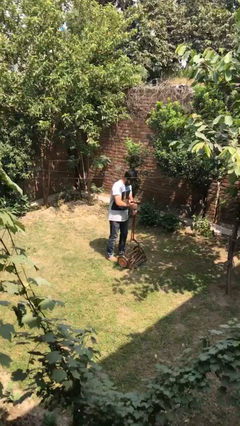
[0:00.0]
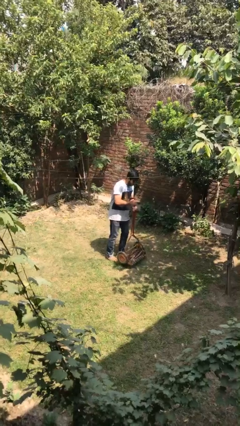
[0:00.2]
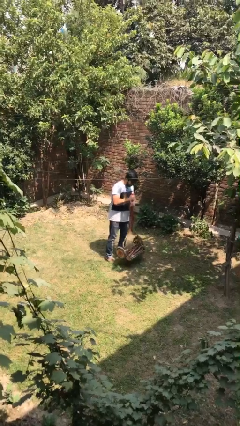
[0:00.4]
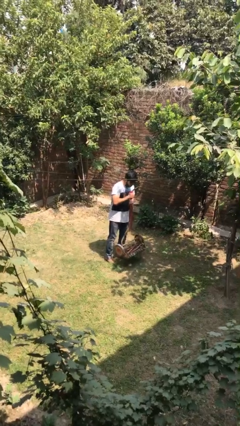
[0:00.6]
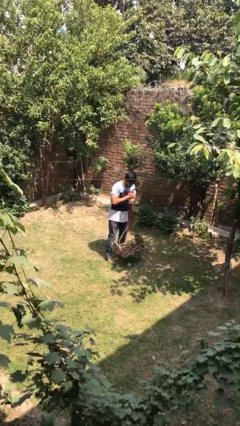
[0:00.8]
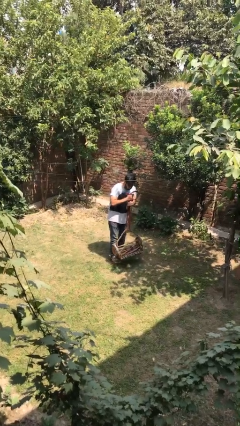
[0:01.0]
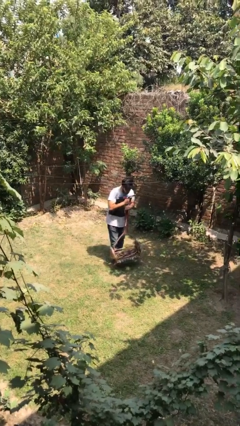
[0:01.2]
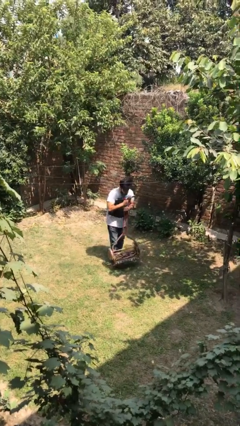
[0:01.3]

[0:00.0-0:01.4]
person picks up object from floor

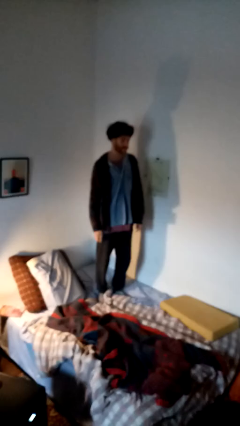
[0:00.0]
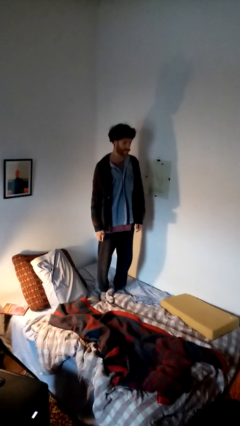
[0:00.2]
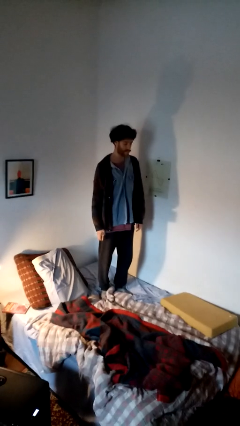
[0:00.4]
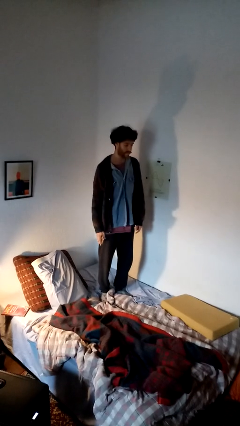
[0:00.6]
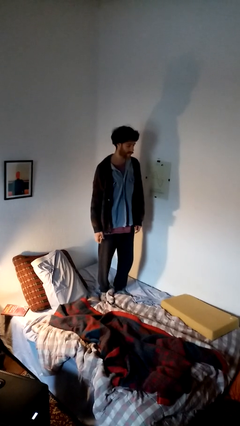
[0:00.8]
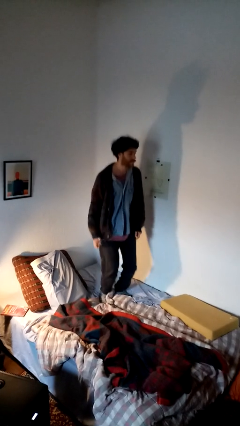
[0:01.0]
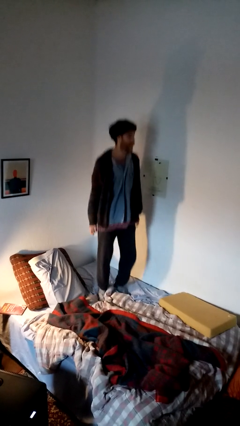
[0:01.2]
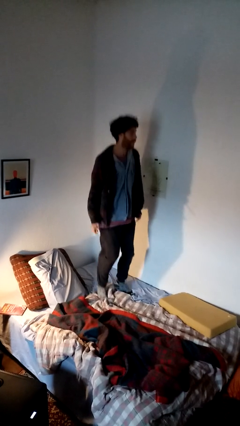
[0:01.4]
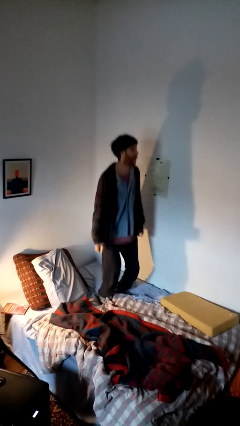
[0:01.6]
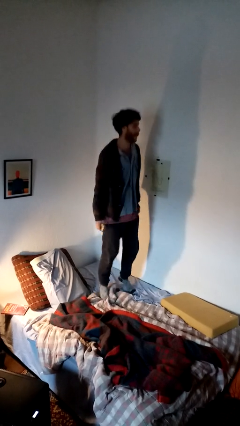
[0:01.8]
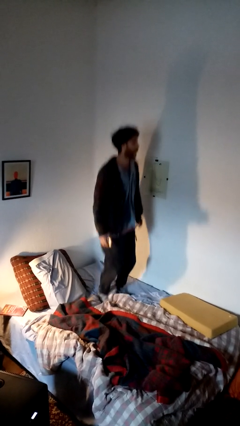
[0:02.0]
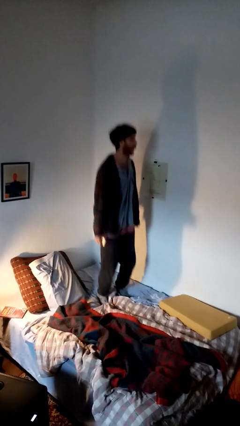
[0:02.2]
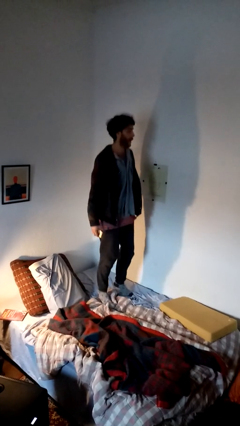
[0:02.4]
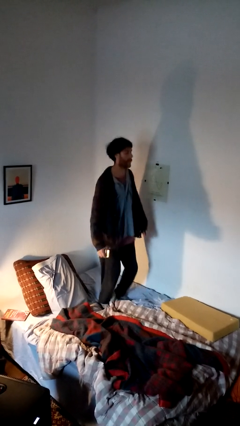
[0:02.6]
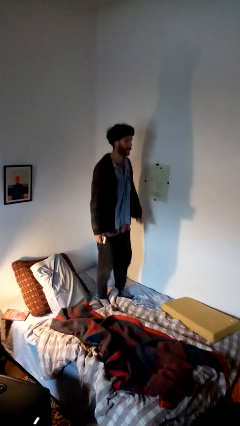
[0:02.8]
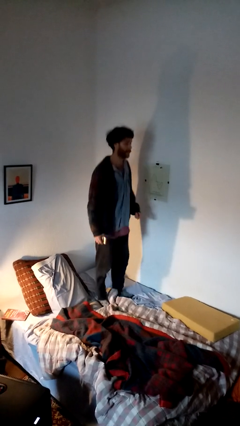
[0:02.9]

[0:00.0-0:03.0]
person jumps on bed

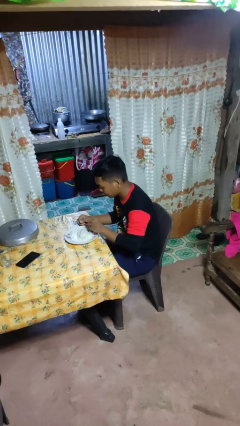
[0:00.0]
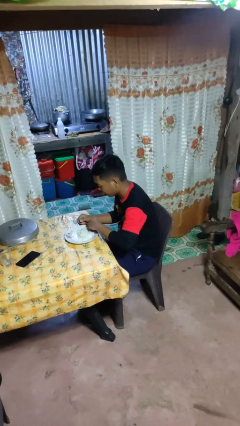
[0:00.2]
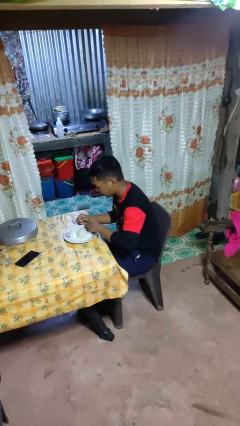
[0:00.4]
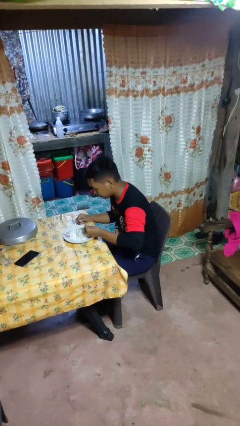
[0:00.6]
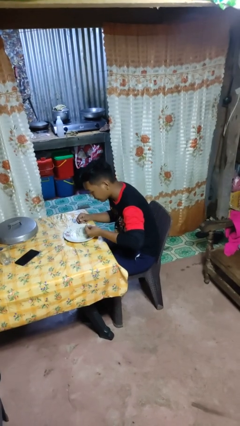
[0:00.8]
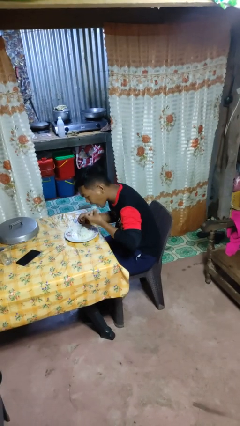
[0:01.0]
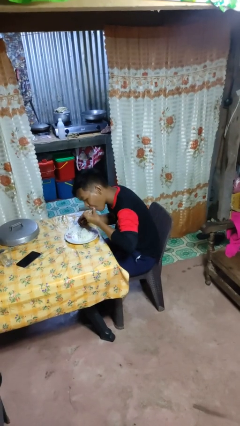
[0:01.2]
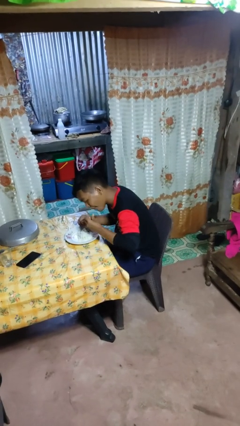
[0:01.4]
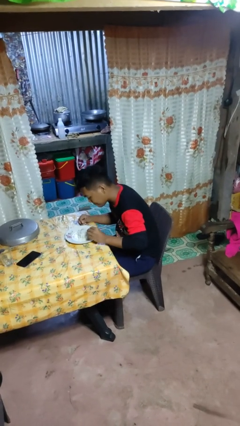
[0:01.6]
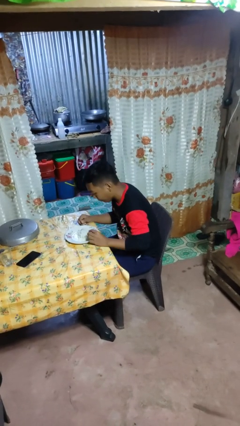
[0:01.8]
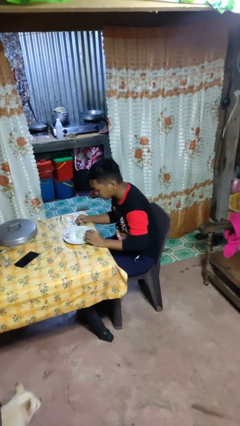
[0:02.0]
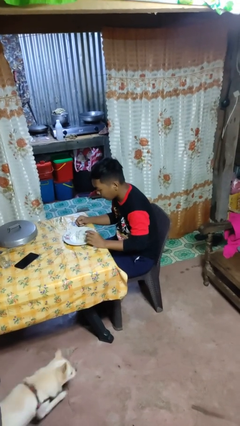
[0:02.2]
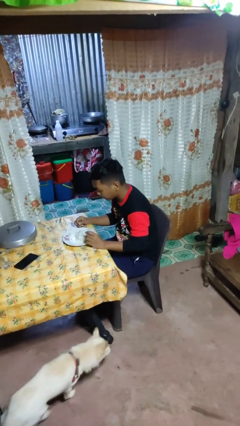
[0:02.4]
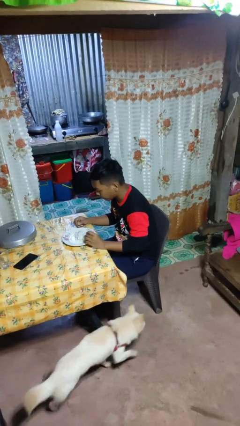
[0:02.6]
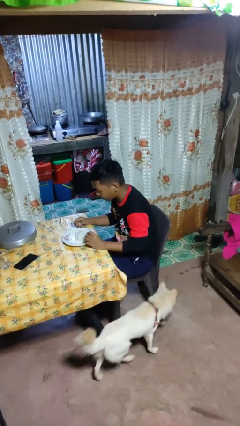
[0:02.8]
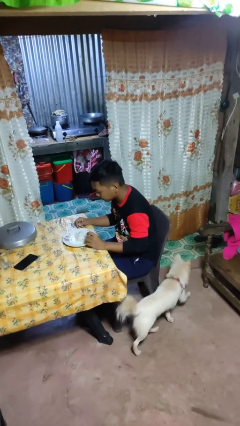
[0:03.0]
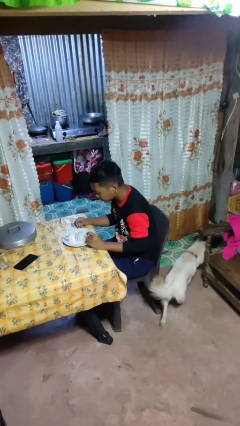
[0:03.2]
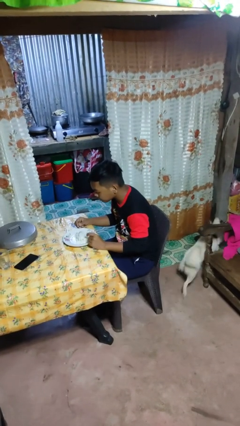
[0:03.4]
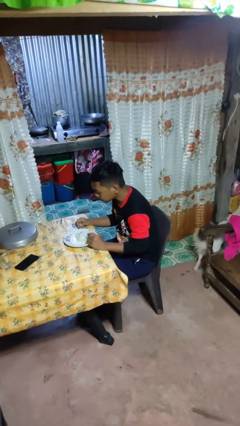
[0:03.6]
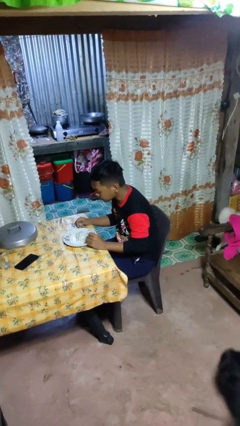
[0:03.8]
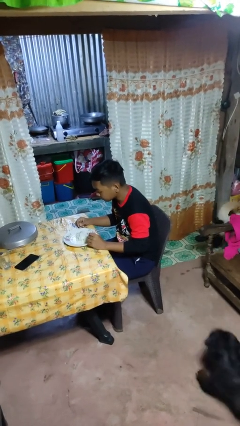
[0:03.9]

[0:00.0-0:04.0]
person eats with hands

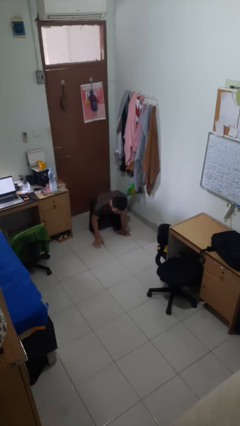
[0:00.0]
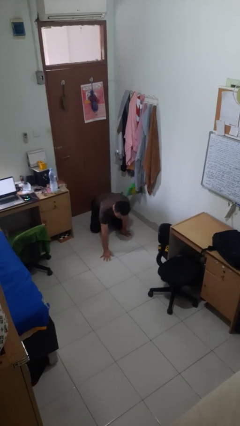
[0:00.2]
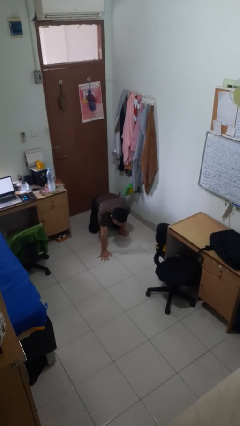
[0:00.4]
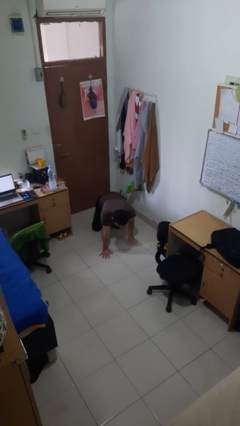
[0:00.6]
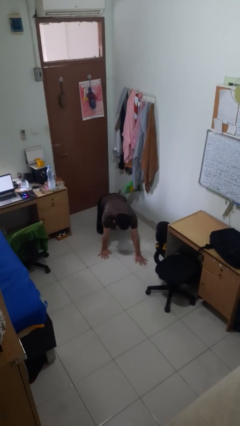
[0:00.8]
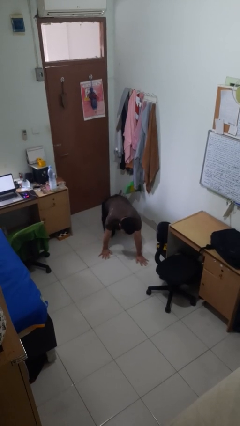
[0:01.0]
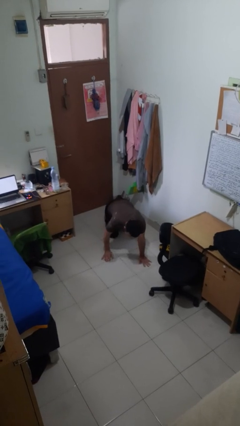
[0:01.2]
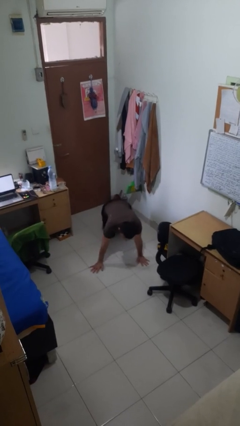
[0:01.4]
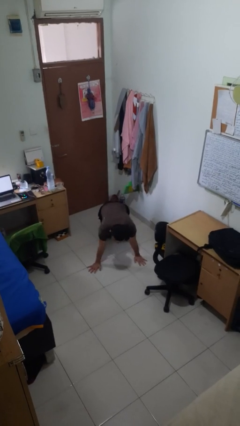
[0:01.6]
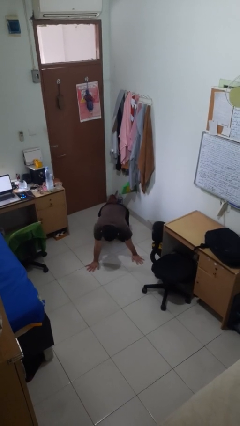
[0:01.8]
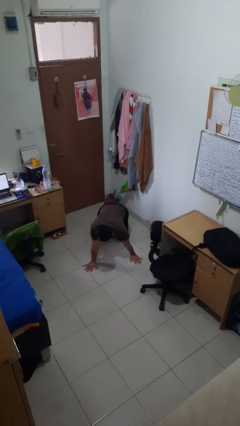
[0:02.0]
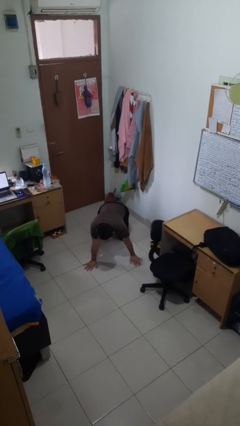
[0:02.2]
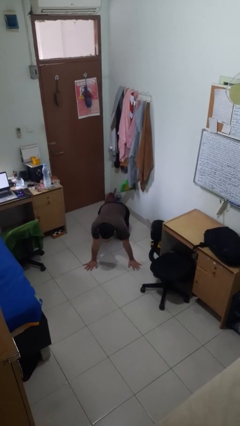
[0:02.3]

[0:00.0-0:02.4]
person crawls

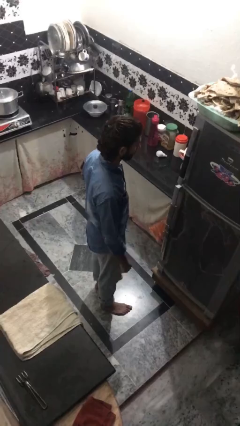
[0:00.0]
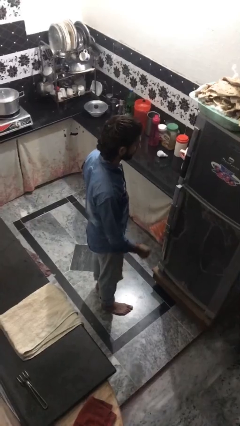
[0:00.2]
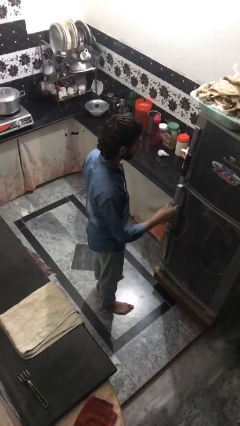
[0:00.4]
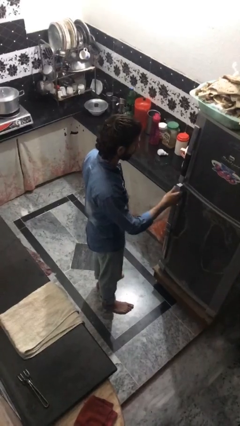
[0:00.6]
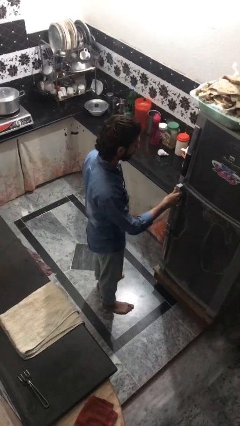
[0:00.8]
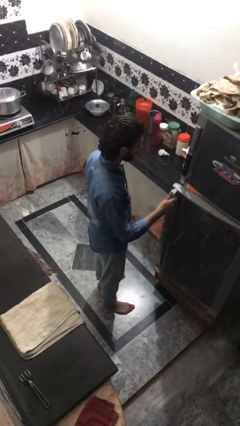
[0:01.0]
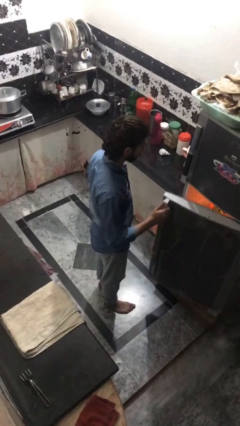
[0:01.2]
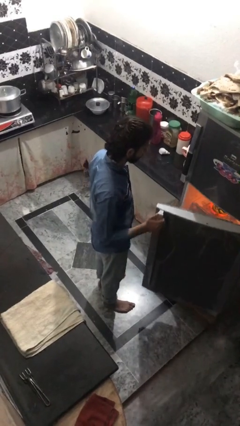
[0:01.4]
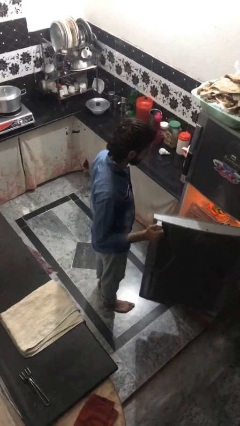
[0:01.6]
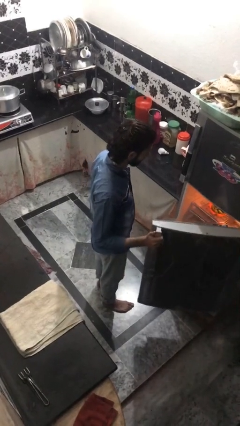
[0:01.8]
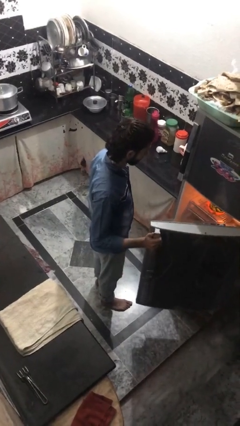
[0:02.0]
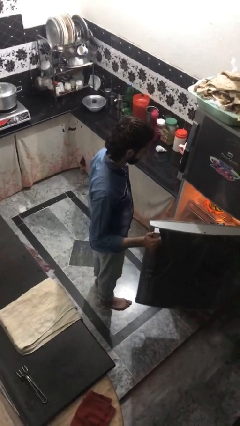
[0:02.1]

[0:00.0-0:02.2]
person opens refrigerator

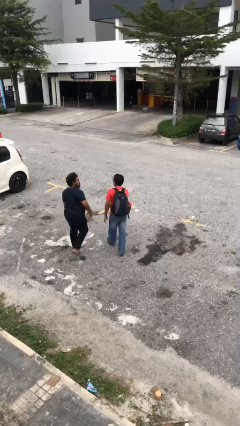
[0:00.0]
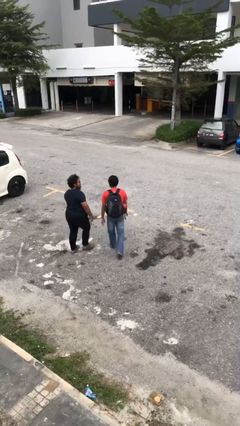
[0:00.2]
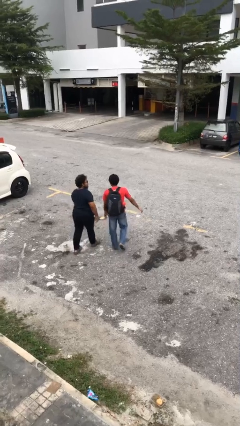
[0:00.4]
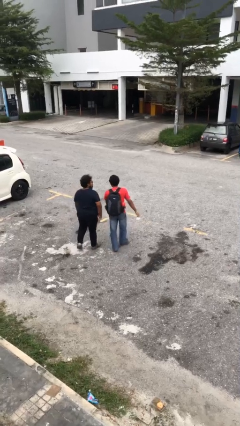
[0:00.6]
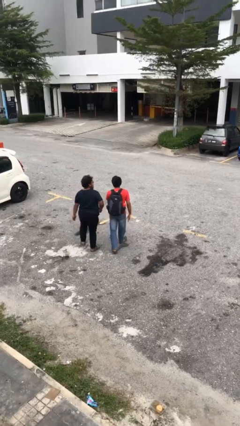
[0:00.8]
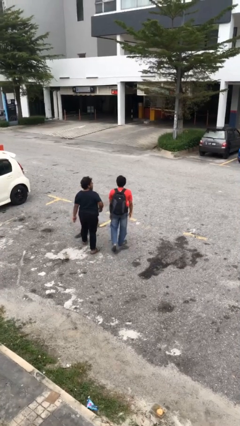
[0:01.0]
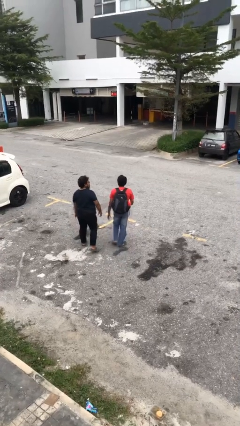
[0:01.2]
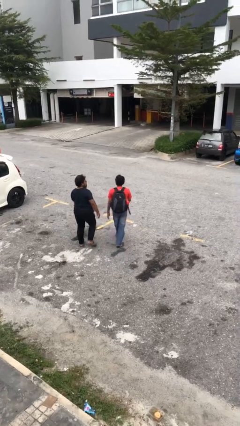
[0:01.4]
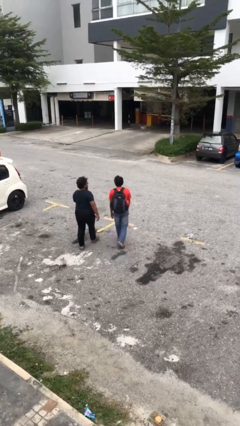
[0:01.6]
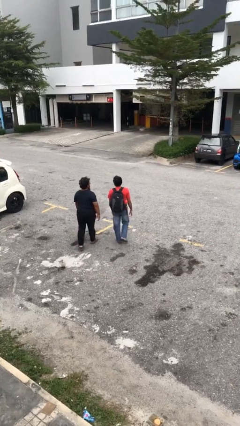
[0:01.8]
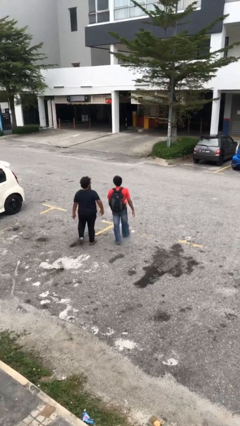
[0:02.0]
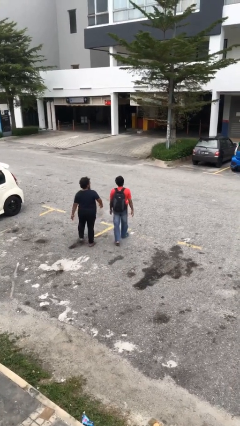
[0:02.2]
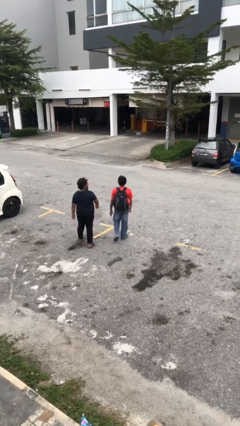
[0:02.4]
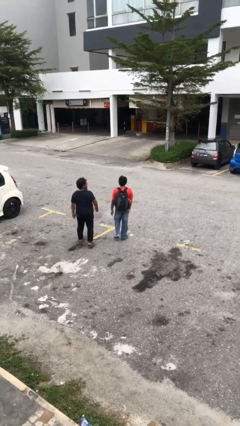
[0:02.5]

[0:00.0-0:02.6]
person talks to person

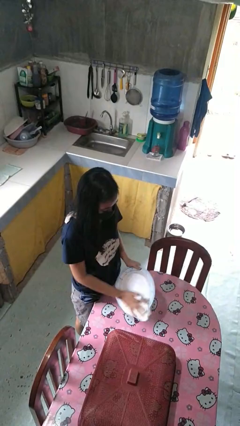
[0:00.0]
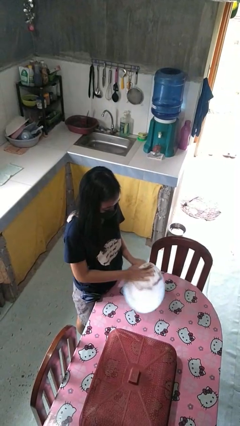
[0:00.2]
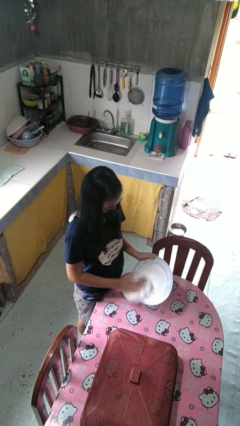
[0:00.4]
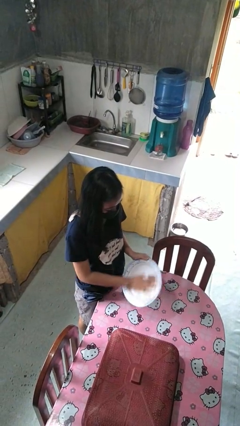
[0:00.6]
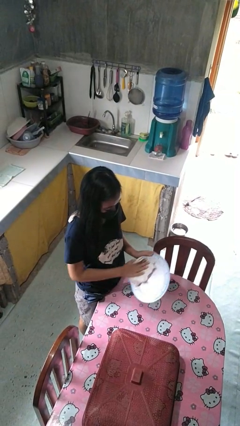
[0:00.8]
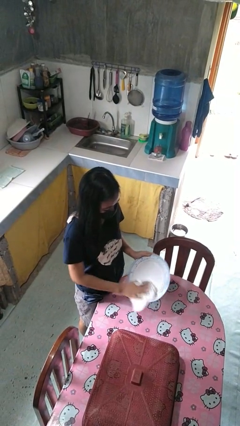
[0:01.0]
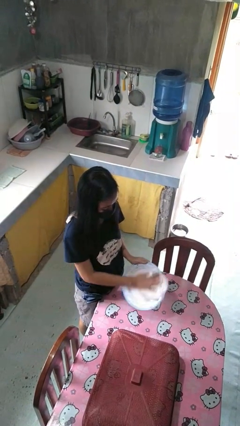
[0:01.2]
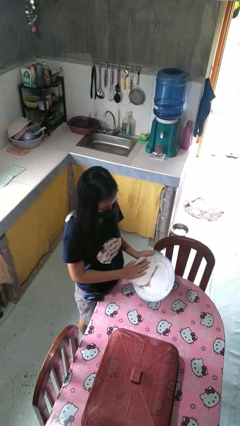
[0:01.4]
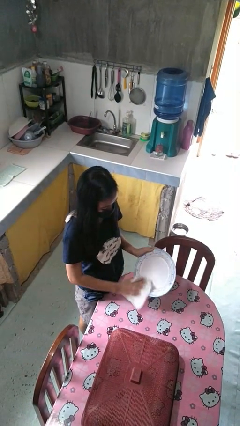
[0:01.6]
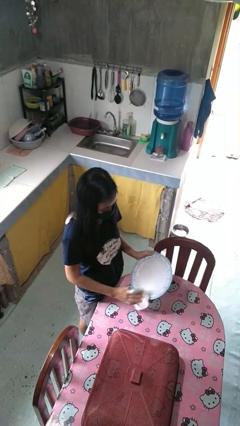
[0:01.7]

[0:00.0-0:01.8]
person dries dish
